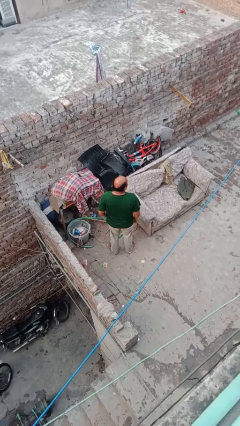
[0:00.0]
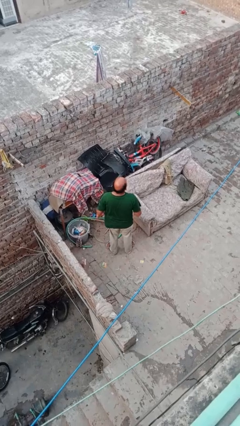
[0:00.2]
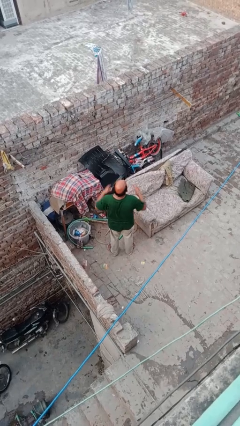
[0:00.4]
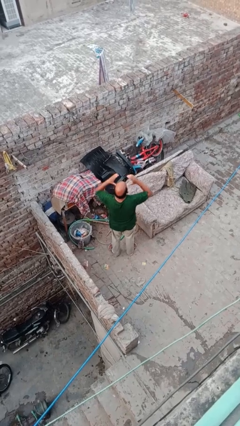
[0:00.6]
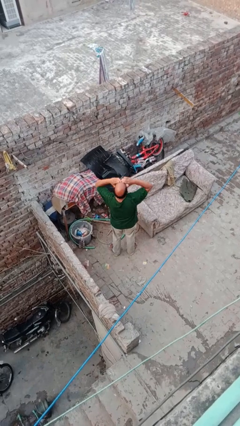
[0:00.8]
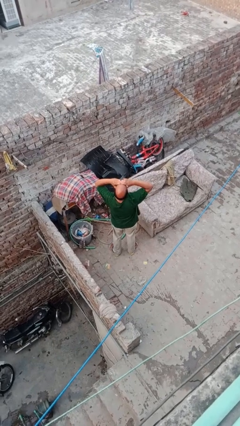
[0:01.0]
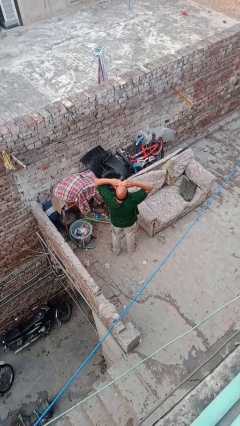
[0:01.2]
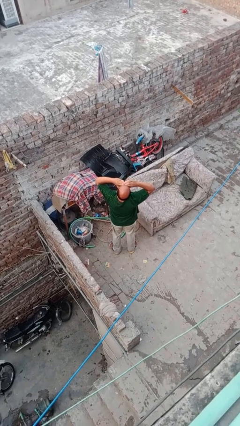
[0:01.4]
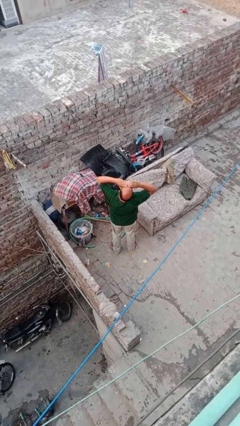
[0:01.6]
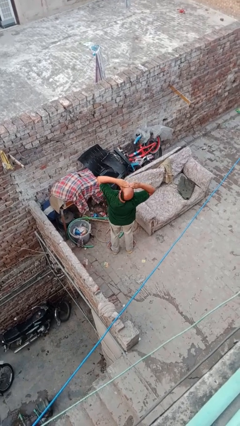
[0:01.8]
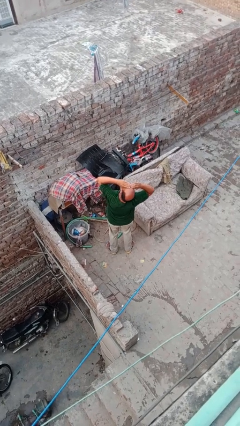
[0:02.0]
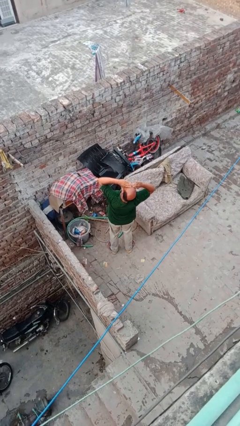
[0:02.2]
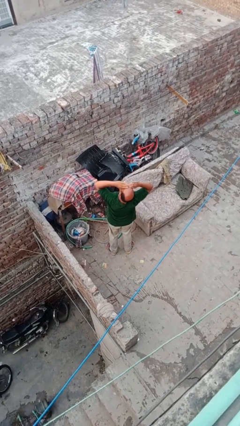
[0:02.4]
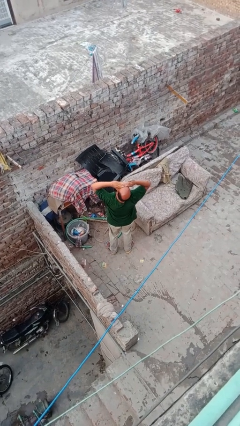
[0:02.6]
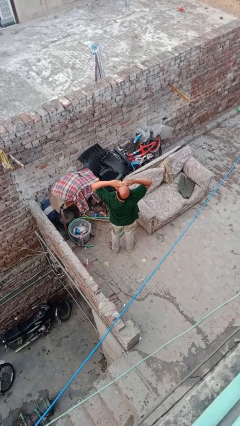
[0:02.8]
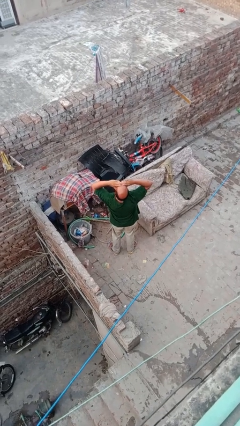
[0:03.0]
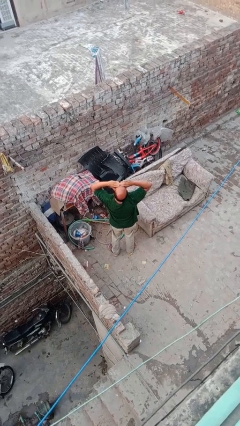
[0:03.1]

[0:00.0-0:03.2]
person shades eyes

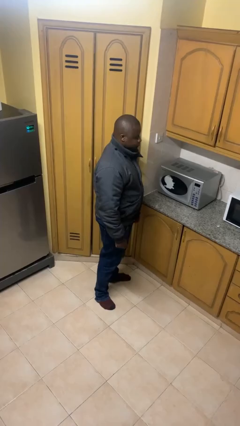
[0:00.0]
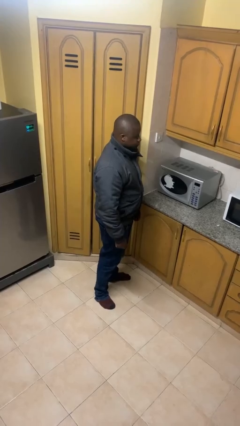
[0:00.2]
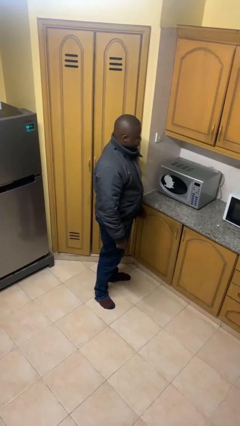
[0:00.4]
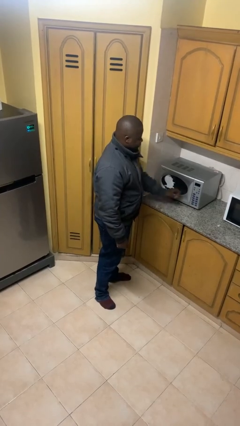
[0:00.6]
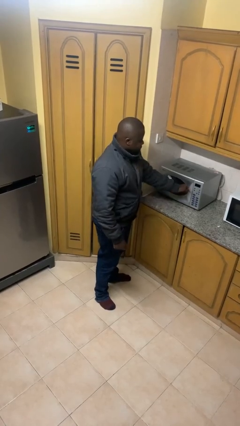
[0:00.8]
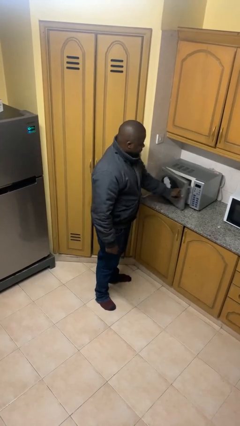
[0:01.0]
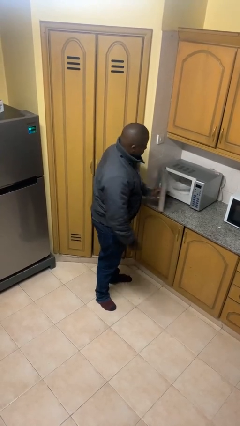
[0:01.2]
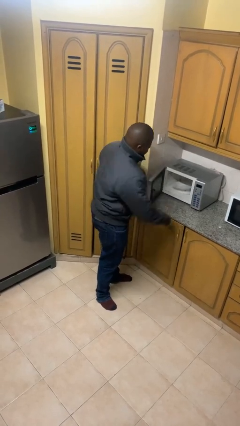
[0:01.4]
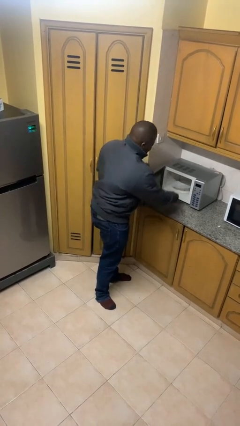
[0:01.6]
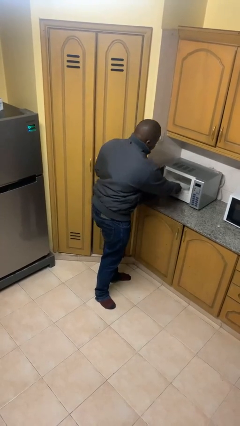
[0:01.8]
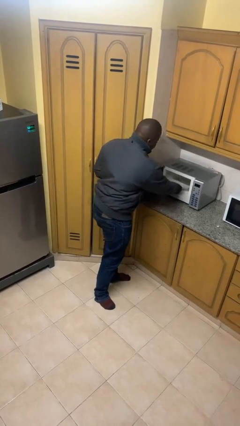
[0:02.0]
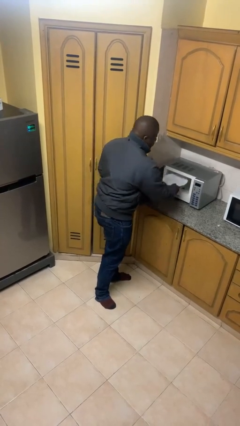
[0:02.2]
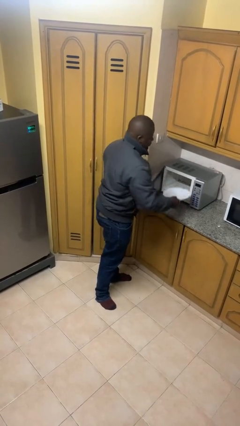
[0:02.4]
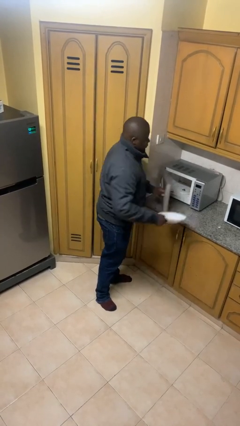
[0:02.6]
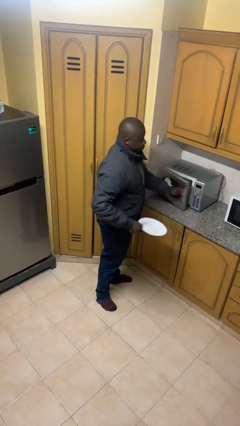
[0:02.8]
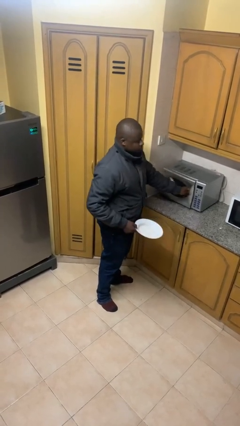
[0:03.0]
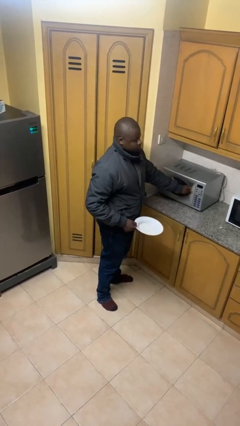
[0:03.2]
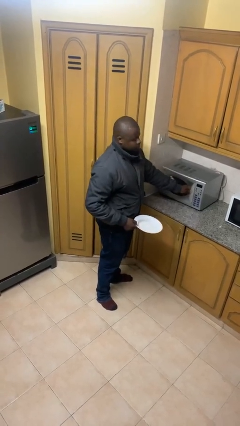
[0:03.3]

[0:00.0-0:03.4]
person takes object from microwave

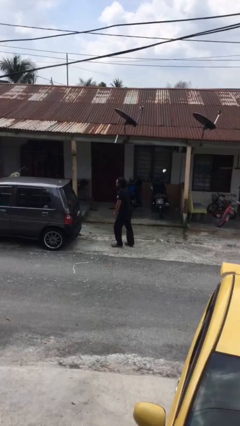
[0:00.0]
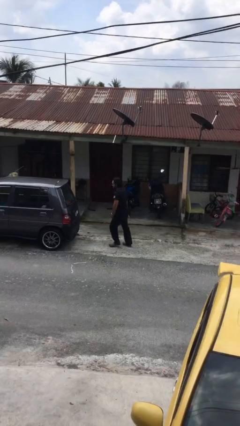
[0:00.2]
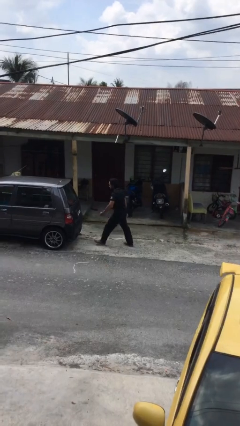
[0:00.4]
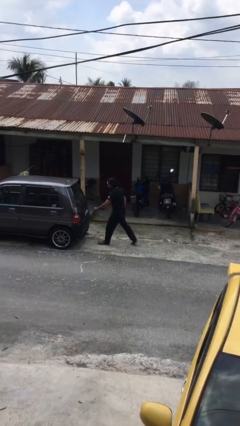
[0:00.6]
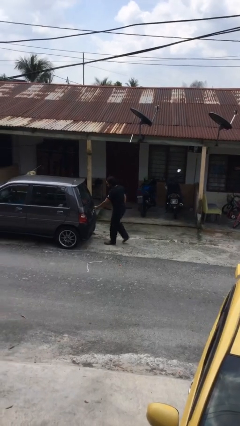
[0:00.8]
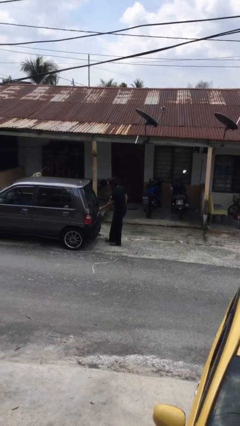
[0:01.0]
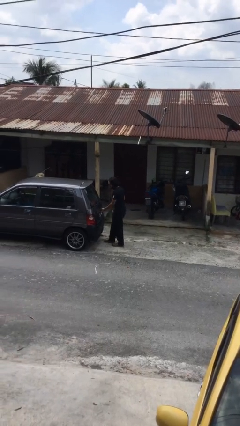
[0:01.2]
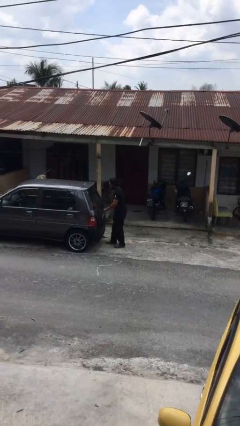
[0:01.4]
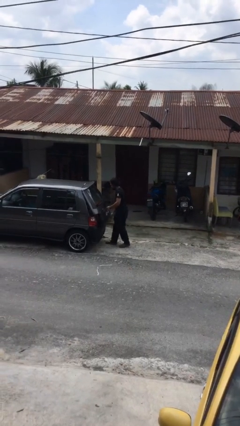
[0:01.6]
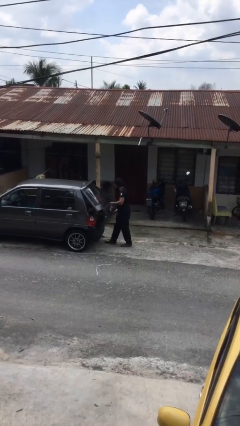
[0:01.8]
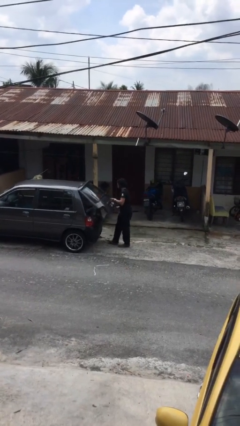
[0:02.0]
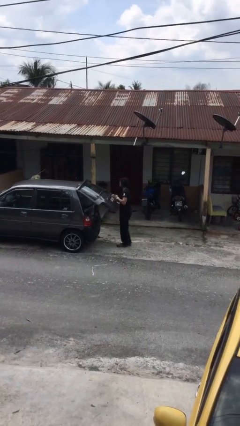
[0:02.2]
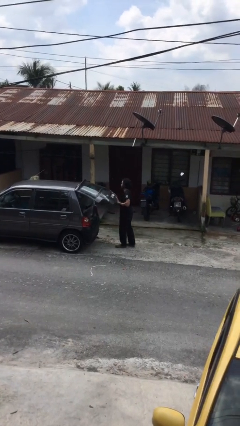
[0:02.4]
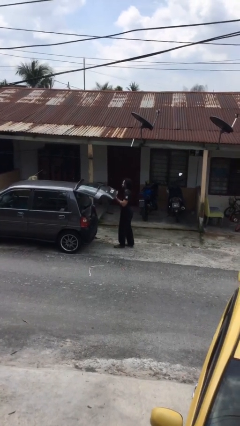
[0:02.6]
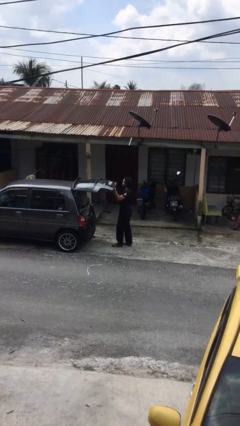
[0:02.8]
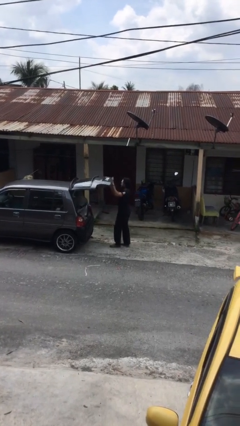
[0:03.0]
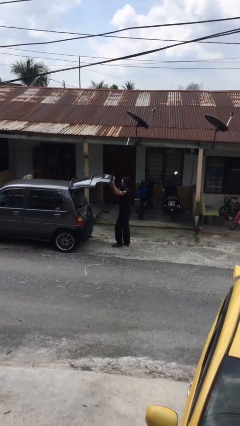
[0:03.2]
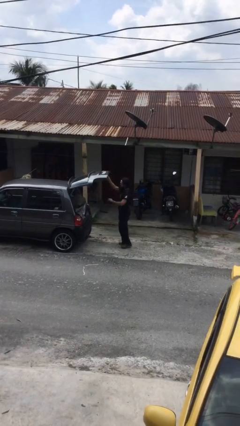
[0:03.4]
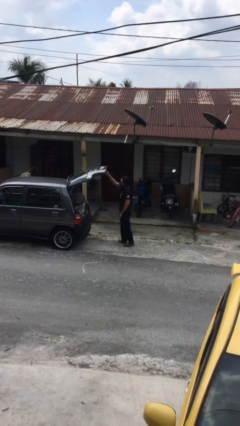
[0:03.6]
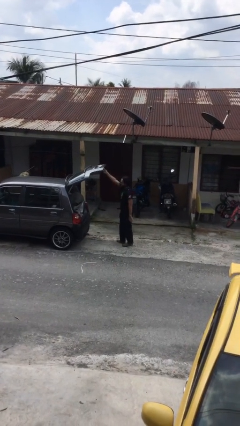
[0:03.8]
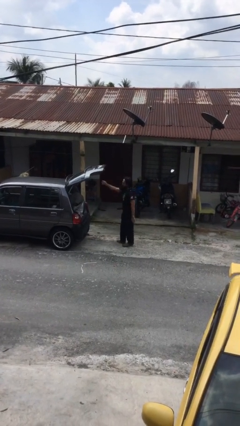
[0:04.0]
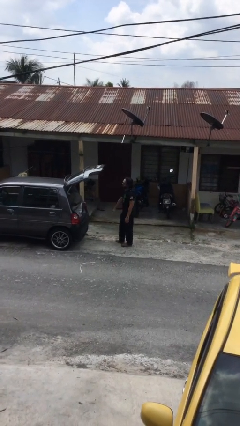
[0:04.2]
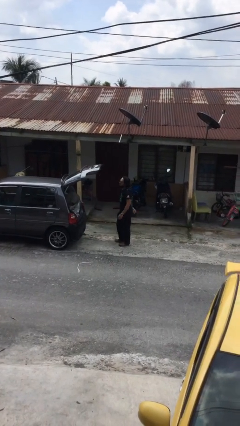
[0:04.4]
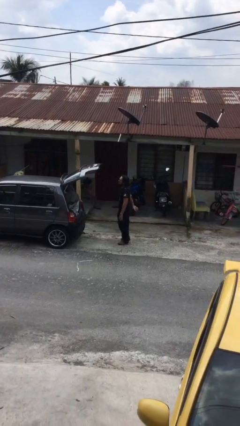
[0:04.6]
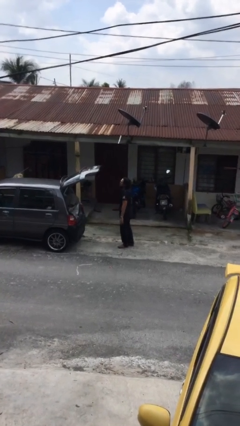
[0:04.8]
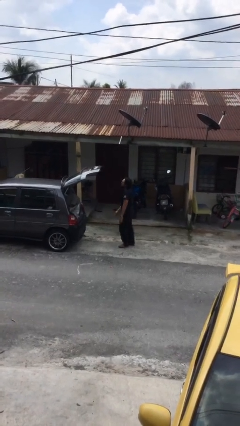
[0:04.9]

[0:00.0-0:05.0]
person opens car trunk

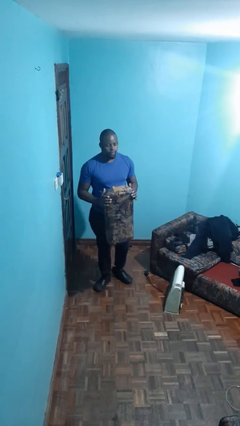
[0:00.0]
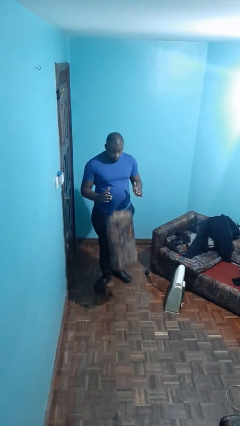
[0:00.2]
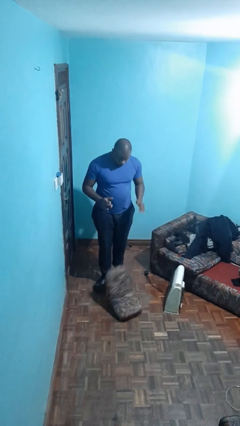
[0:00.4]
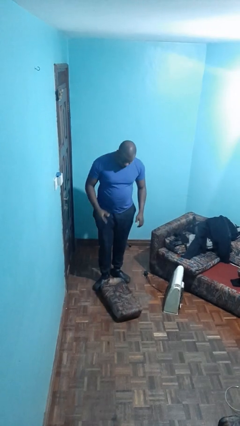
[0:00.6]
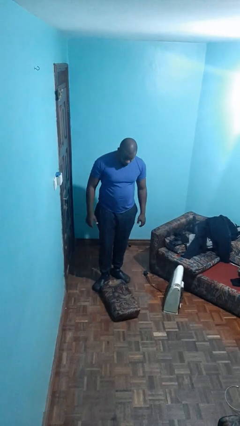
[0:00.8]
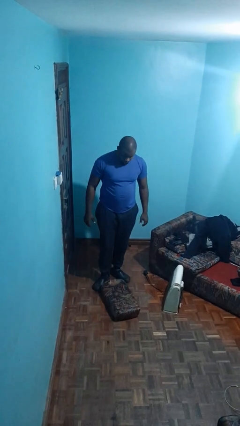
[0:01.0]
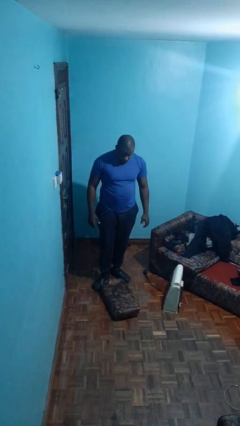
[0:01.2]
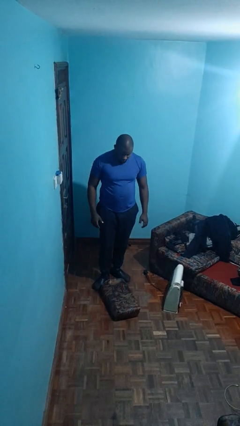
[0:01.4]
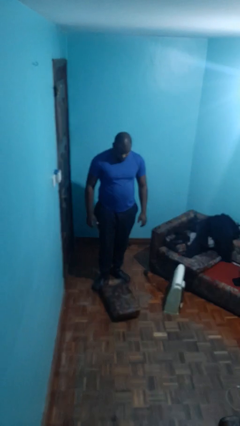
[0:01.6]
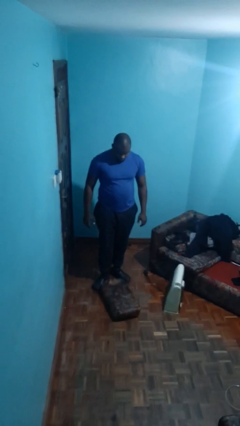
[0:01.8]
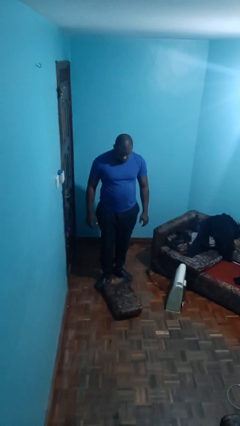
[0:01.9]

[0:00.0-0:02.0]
person drops object

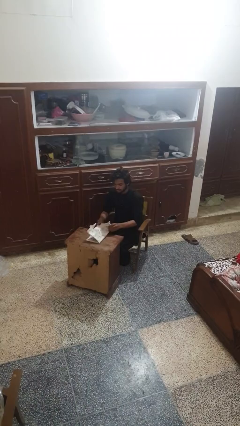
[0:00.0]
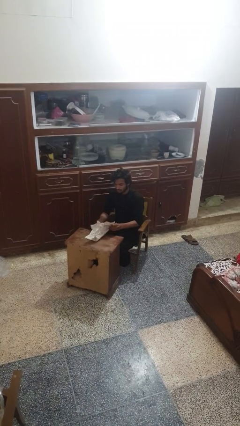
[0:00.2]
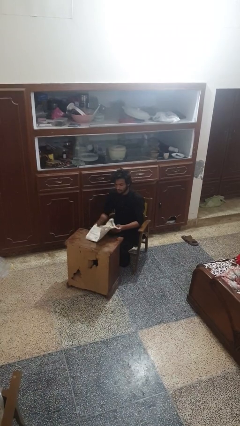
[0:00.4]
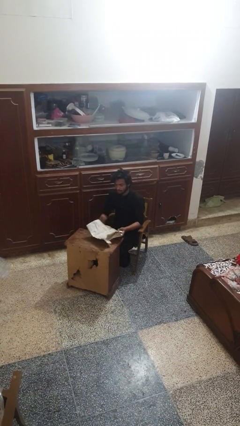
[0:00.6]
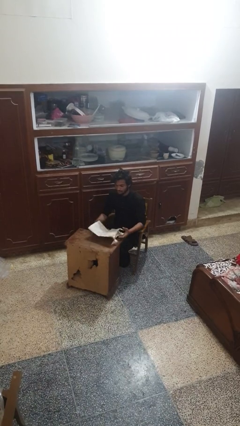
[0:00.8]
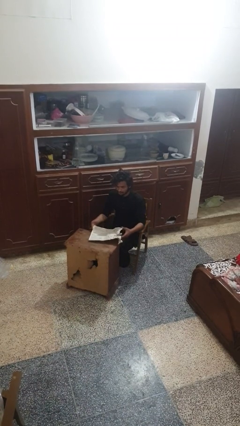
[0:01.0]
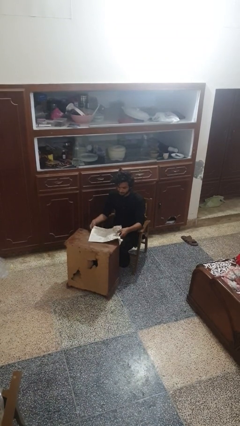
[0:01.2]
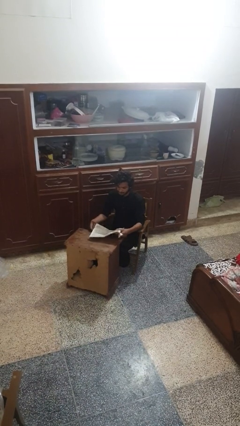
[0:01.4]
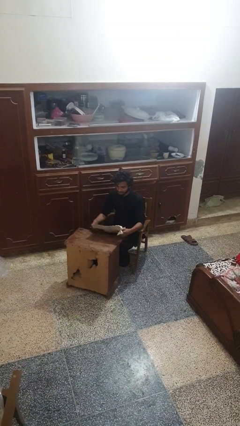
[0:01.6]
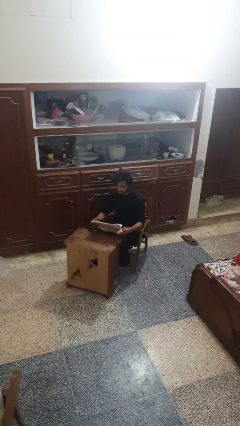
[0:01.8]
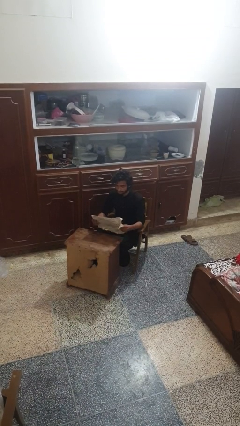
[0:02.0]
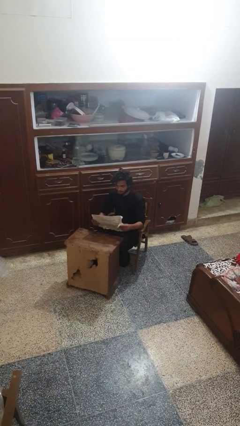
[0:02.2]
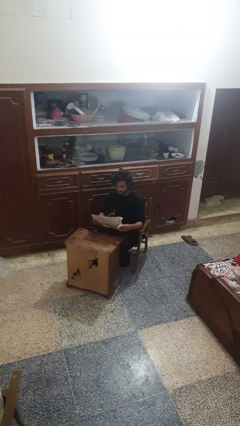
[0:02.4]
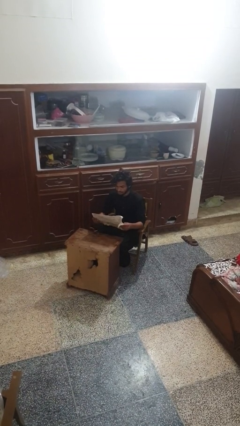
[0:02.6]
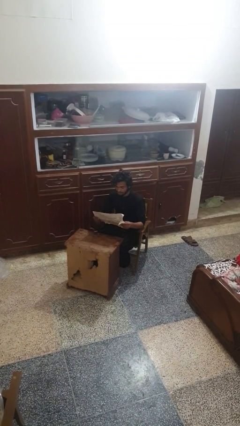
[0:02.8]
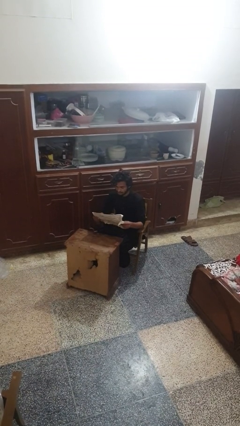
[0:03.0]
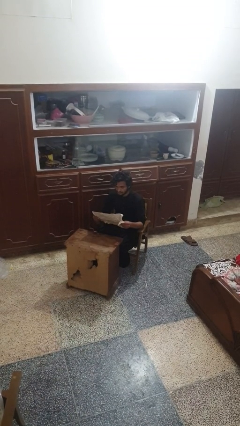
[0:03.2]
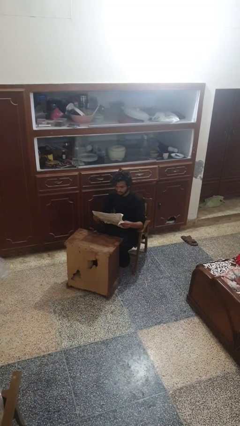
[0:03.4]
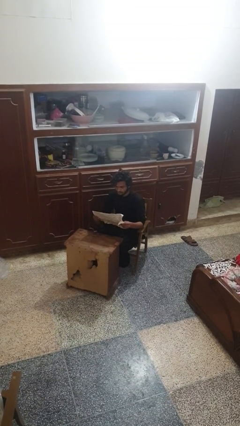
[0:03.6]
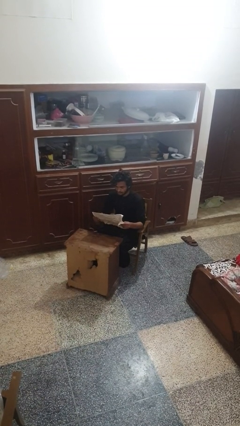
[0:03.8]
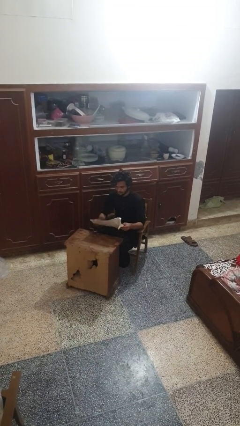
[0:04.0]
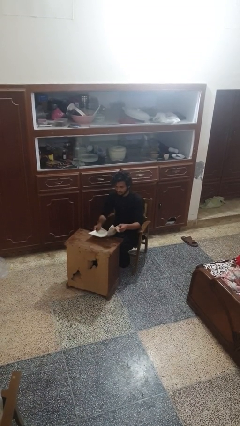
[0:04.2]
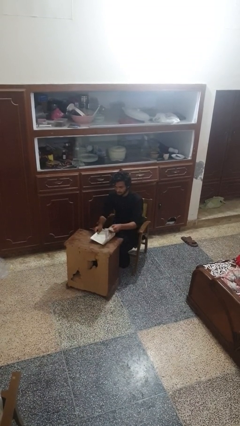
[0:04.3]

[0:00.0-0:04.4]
person reads newspaper
